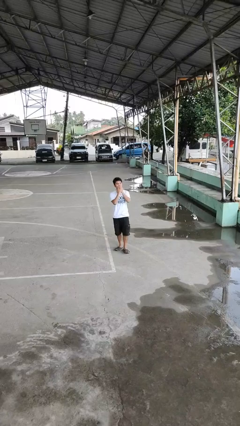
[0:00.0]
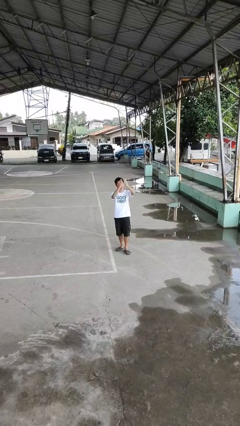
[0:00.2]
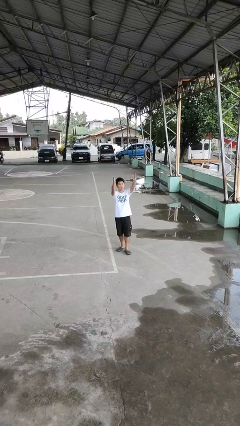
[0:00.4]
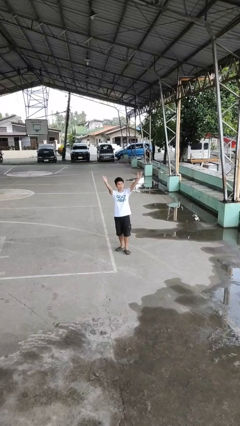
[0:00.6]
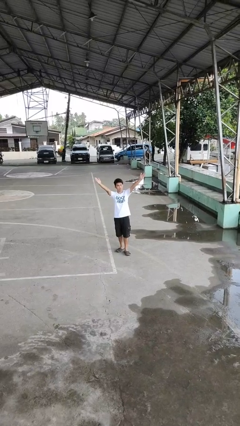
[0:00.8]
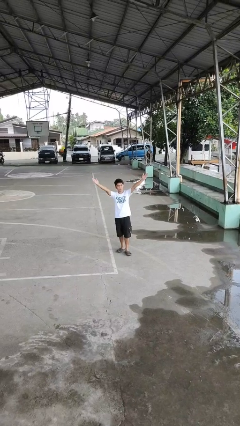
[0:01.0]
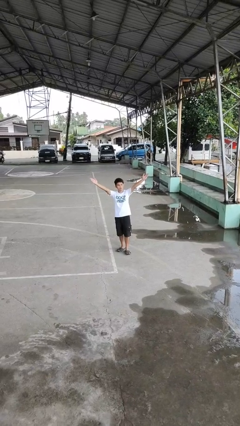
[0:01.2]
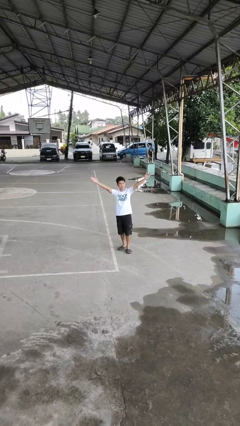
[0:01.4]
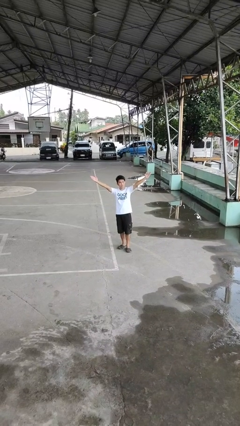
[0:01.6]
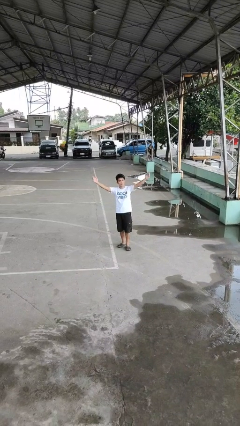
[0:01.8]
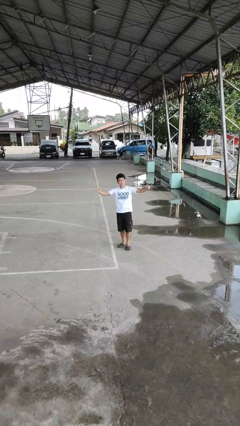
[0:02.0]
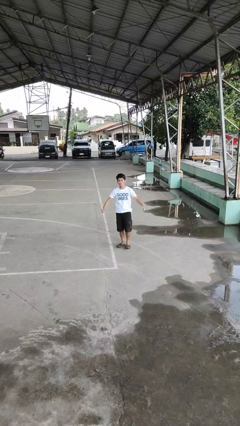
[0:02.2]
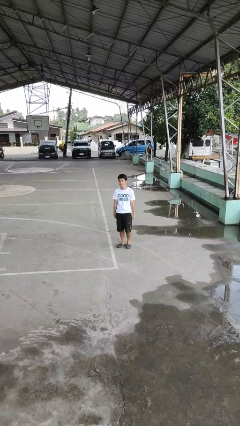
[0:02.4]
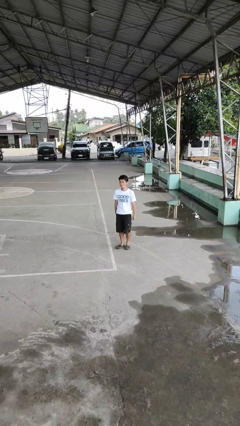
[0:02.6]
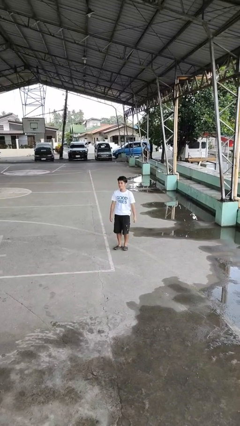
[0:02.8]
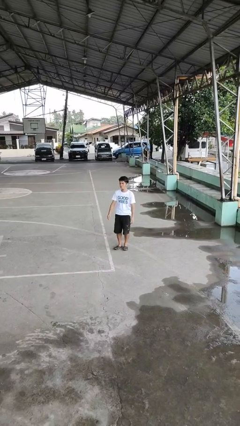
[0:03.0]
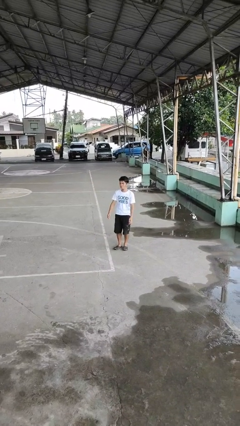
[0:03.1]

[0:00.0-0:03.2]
person gestures blow kiss

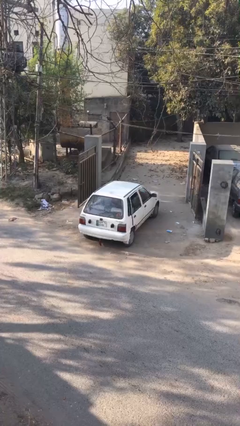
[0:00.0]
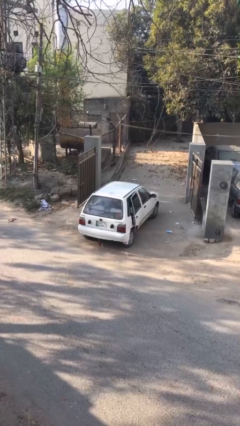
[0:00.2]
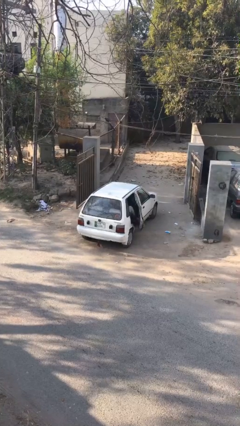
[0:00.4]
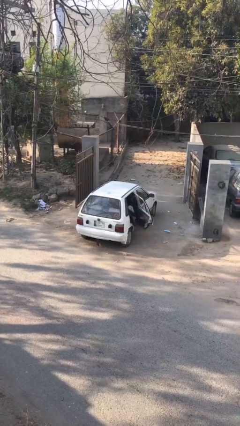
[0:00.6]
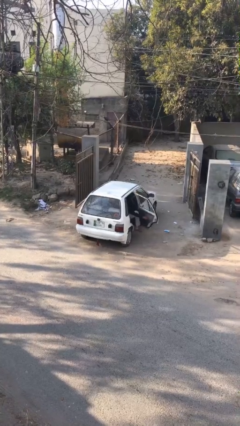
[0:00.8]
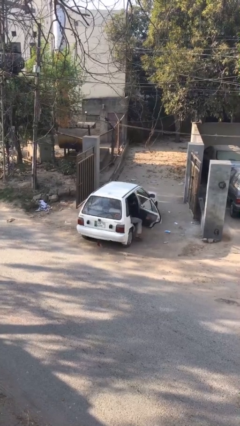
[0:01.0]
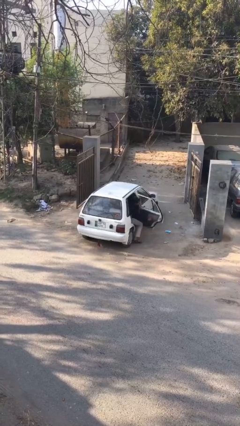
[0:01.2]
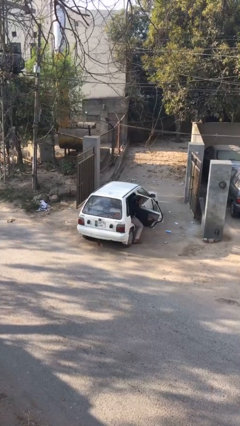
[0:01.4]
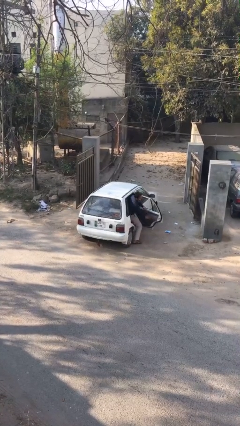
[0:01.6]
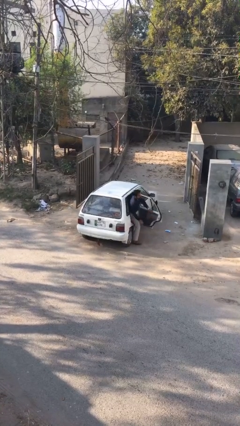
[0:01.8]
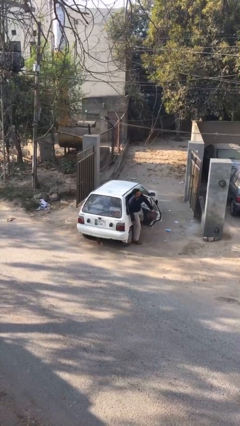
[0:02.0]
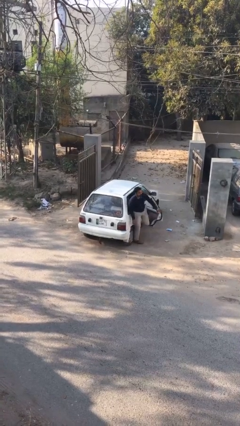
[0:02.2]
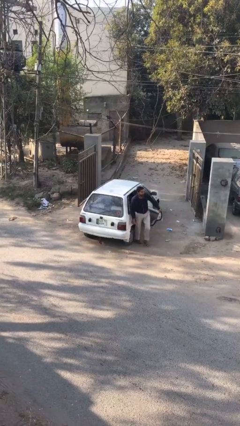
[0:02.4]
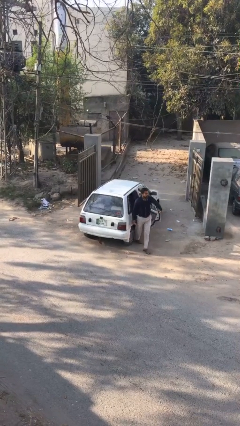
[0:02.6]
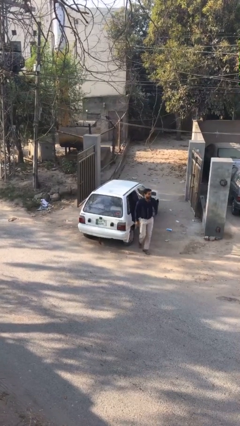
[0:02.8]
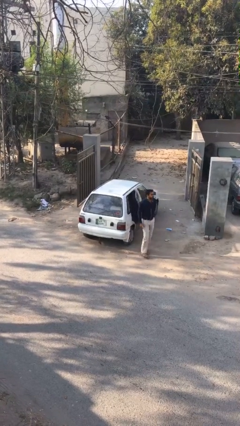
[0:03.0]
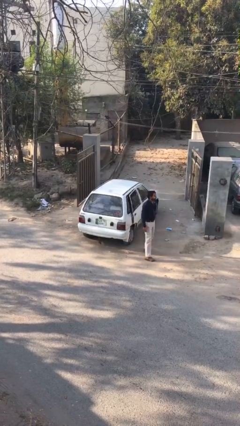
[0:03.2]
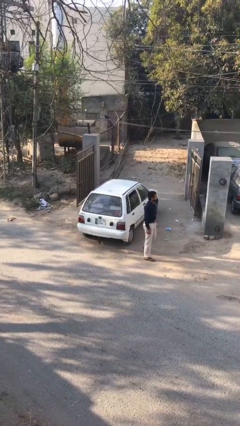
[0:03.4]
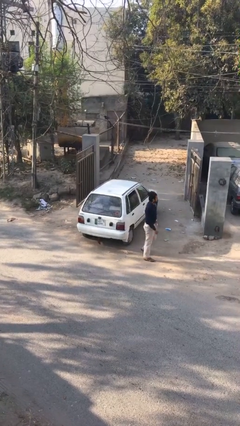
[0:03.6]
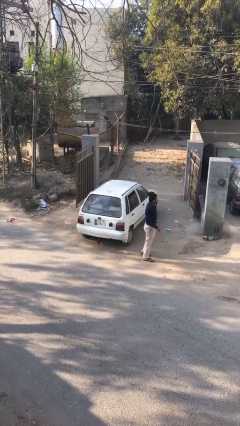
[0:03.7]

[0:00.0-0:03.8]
car drops off person

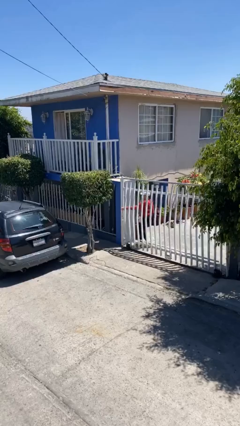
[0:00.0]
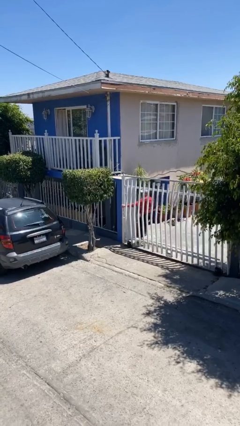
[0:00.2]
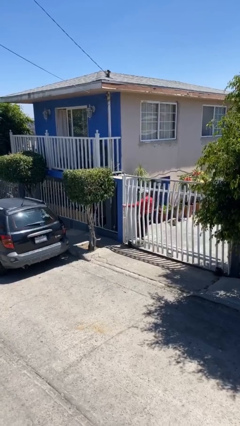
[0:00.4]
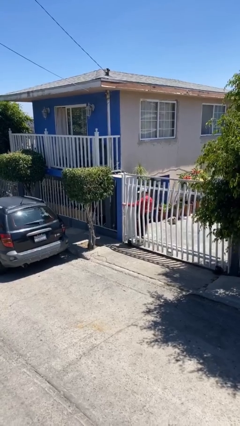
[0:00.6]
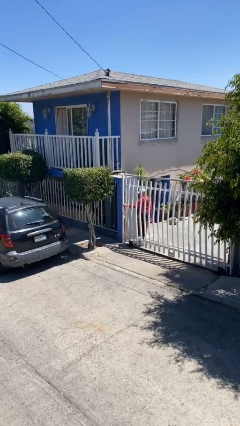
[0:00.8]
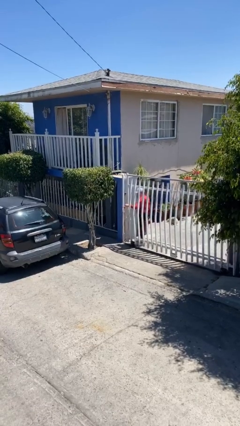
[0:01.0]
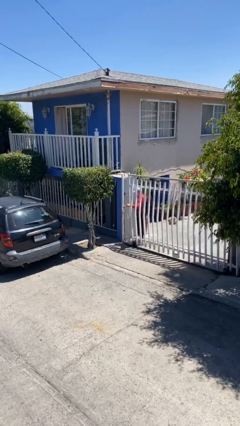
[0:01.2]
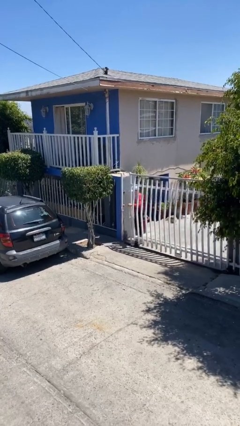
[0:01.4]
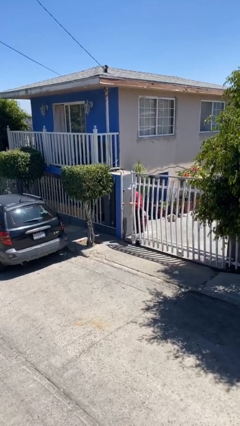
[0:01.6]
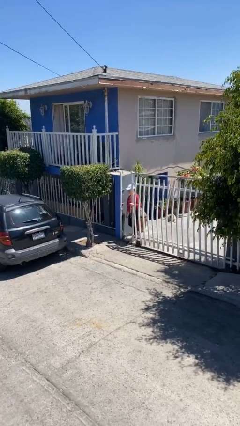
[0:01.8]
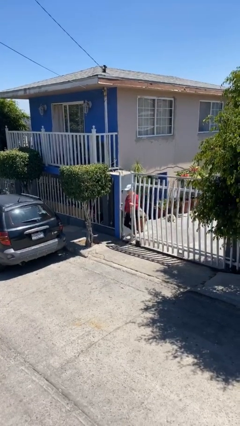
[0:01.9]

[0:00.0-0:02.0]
person opens facility door

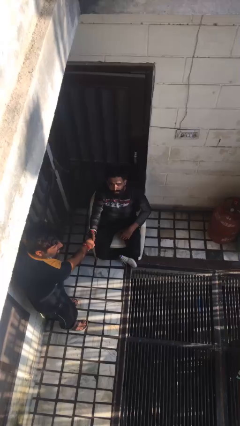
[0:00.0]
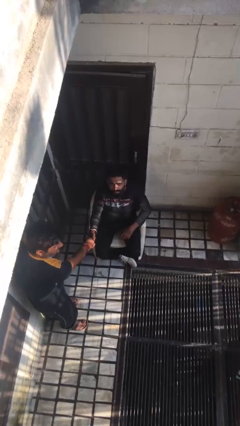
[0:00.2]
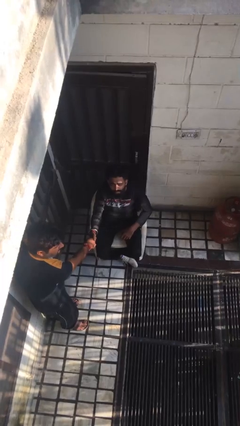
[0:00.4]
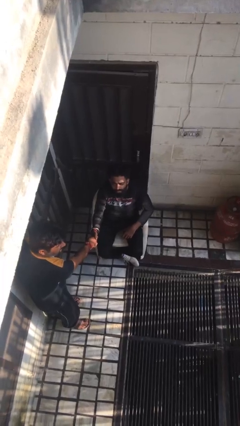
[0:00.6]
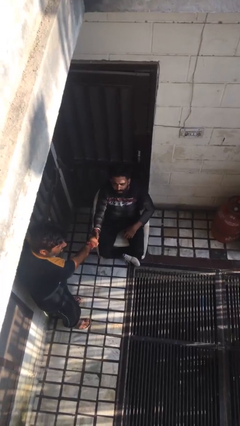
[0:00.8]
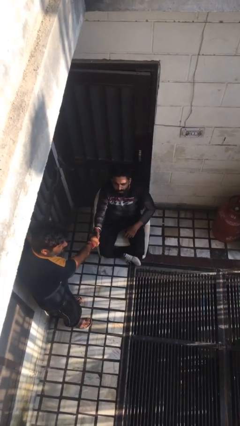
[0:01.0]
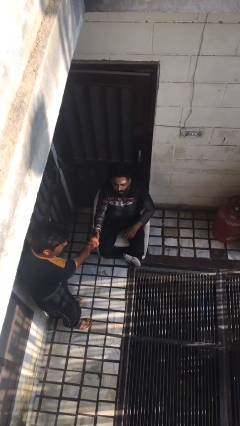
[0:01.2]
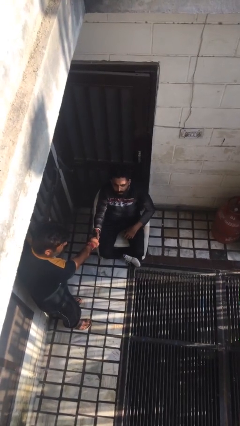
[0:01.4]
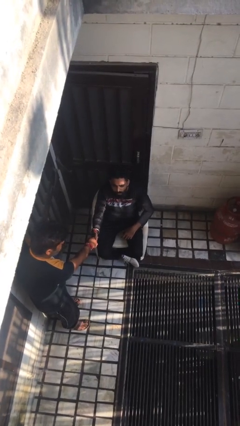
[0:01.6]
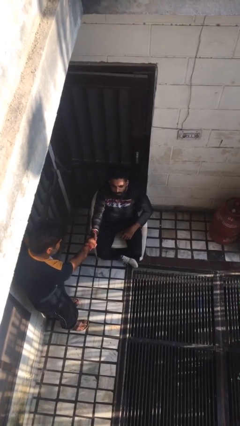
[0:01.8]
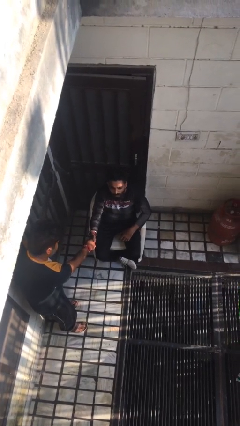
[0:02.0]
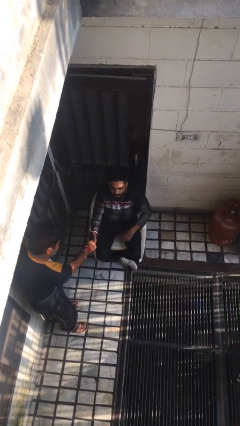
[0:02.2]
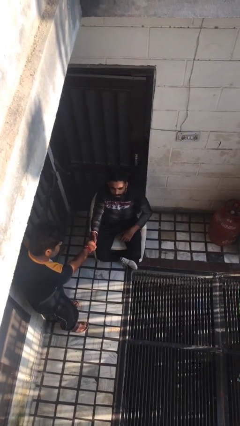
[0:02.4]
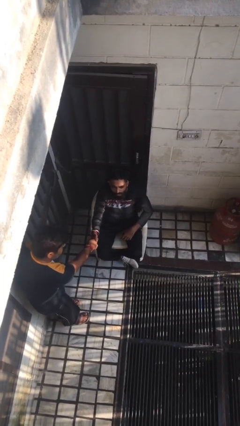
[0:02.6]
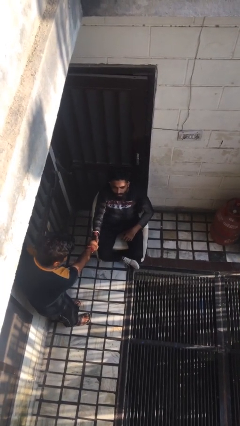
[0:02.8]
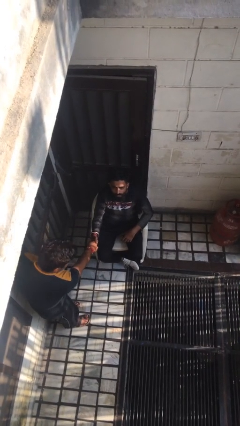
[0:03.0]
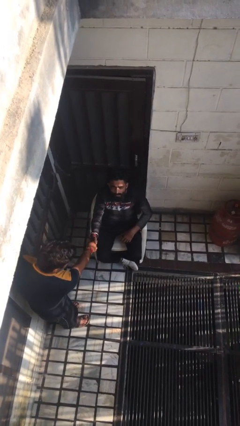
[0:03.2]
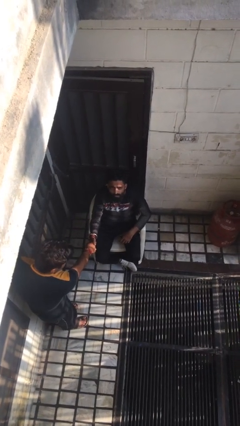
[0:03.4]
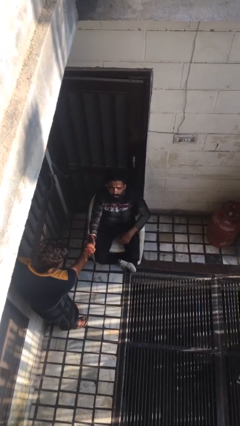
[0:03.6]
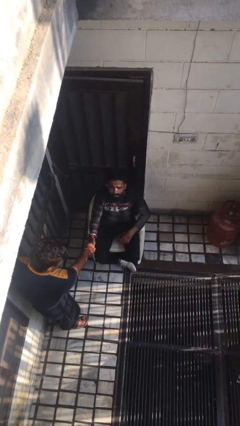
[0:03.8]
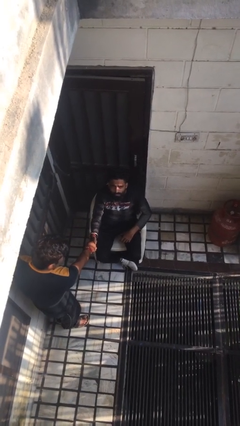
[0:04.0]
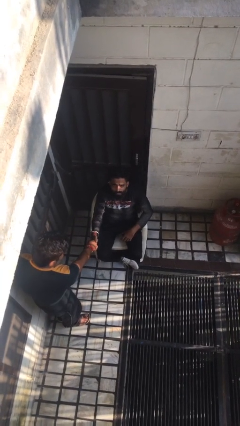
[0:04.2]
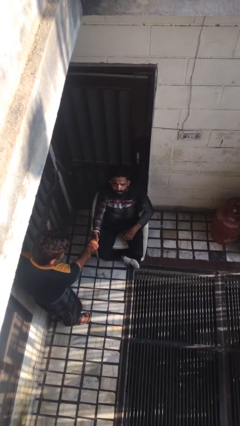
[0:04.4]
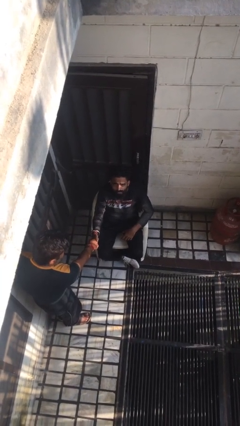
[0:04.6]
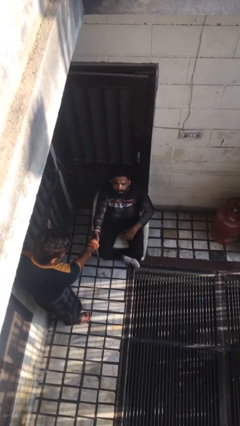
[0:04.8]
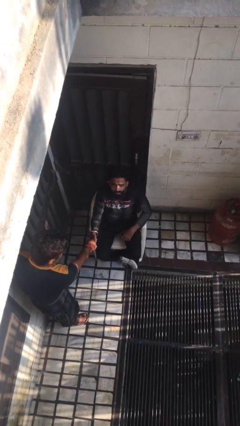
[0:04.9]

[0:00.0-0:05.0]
person shakes hand

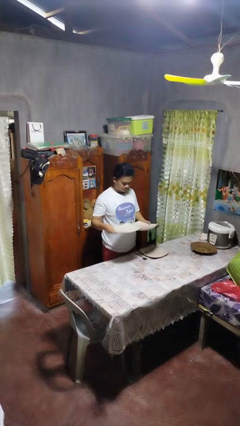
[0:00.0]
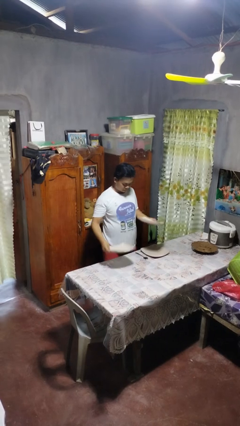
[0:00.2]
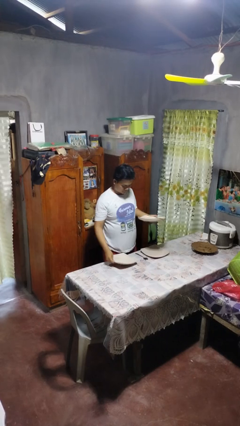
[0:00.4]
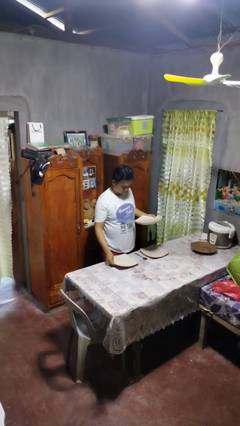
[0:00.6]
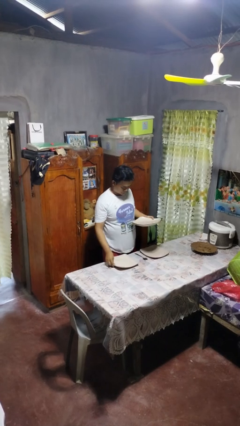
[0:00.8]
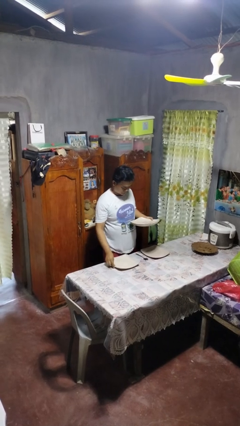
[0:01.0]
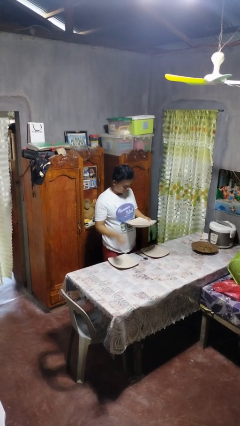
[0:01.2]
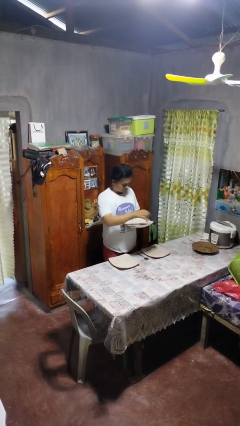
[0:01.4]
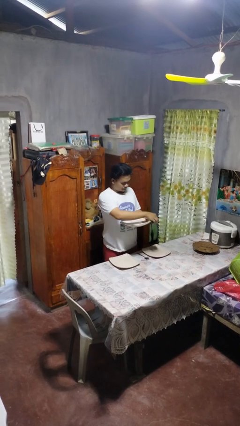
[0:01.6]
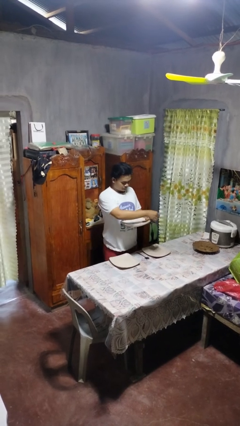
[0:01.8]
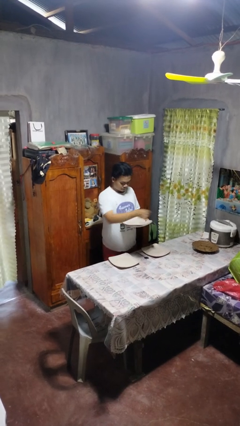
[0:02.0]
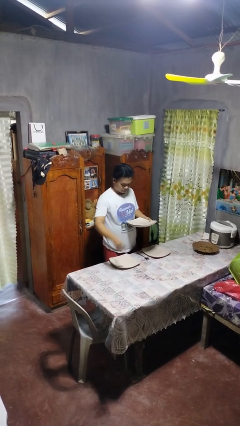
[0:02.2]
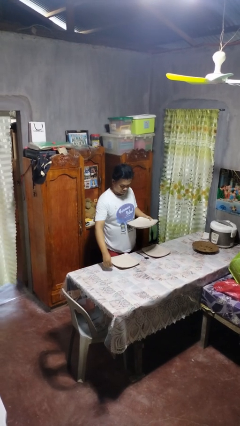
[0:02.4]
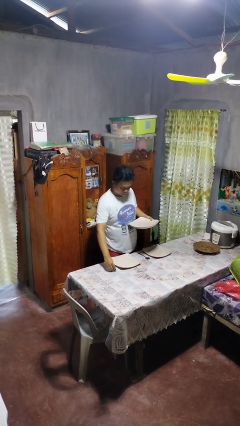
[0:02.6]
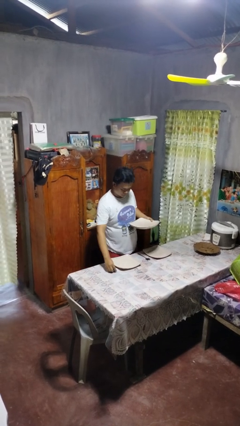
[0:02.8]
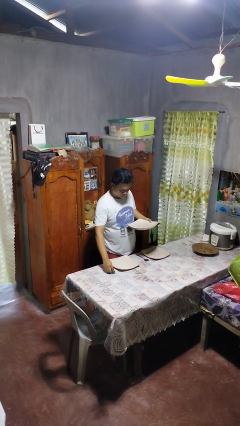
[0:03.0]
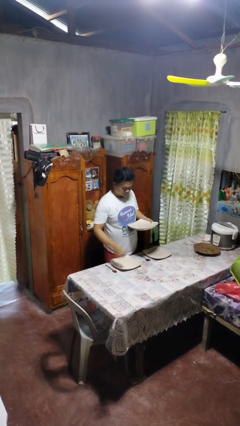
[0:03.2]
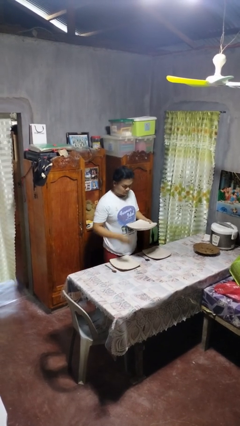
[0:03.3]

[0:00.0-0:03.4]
person sets table
